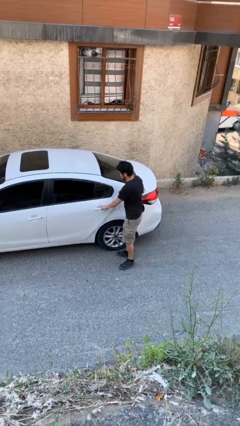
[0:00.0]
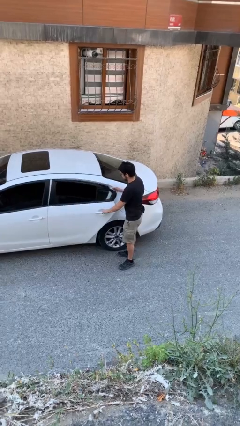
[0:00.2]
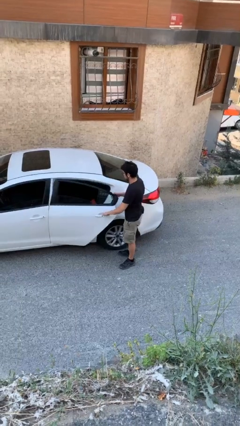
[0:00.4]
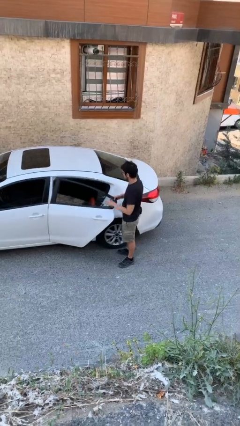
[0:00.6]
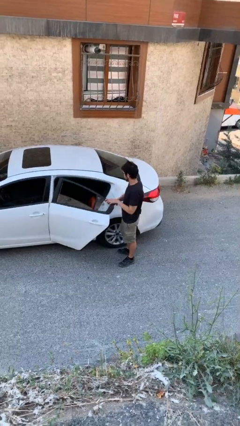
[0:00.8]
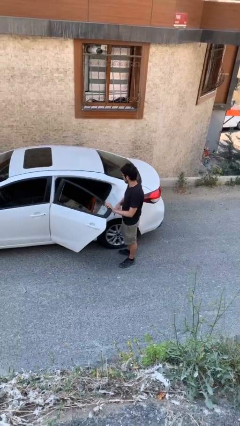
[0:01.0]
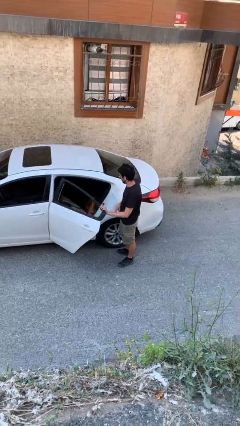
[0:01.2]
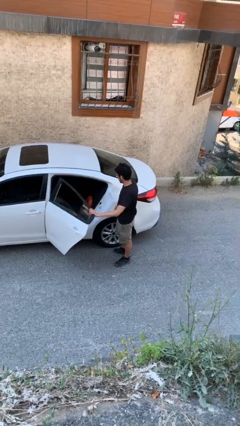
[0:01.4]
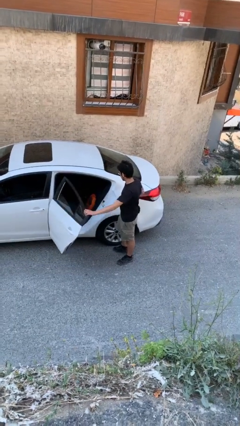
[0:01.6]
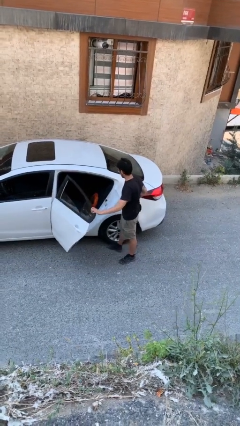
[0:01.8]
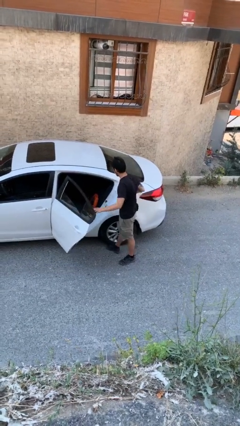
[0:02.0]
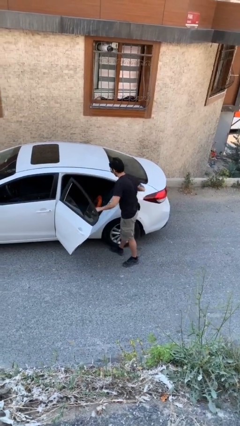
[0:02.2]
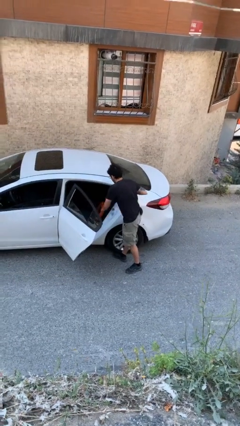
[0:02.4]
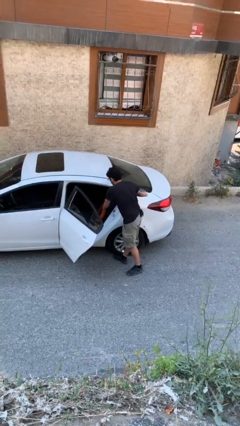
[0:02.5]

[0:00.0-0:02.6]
person opens car door

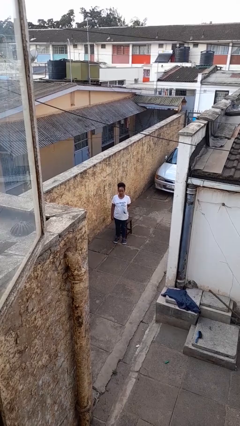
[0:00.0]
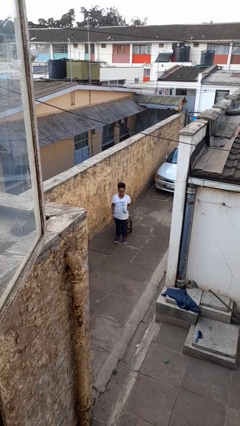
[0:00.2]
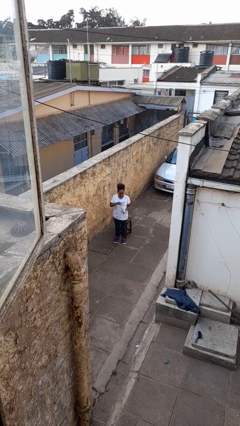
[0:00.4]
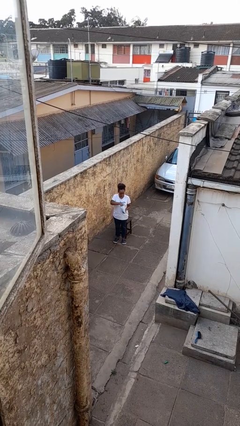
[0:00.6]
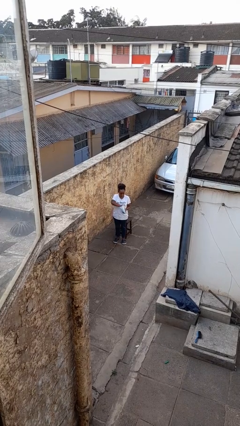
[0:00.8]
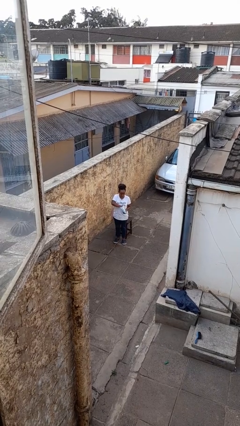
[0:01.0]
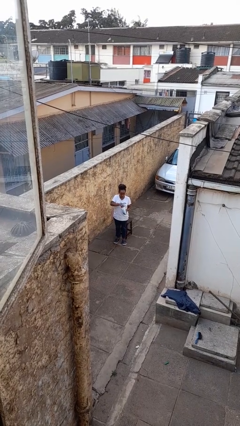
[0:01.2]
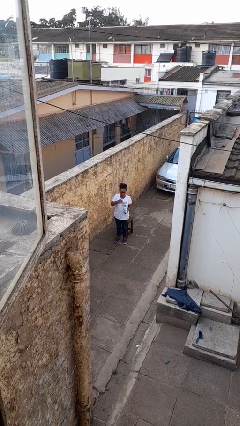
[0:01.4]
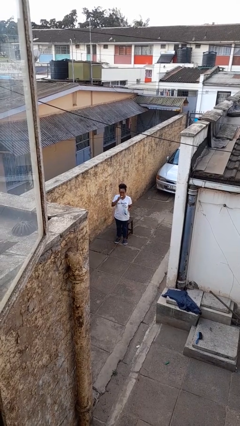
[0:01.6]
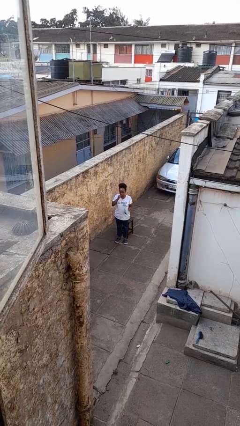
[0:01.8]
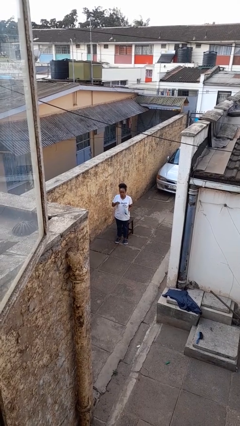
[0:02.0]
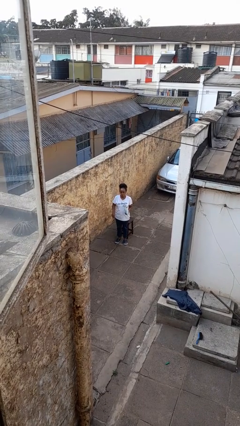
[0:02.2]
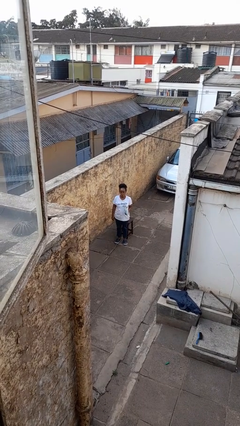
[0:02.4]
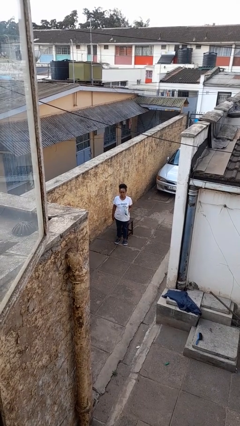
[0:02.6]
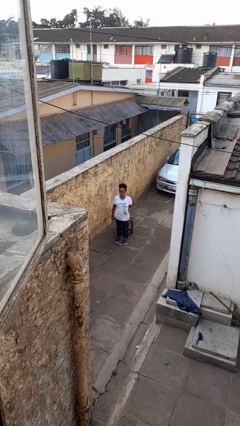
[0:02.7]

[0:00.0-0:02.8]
person eats snack from bag

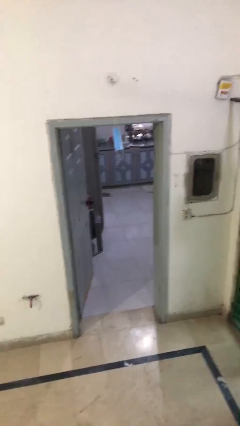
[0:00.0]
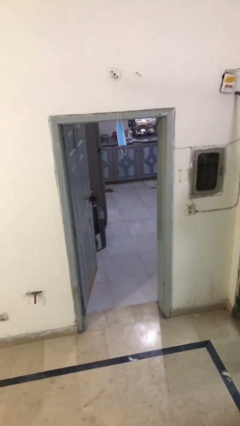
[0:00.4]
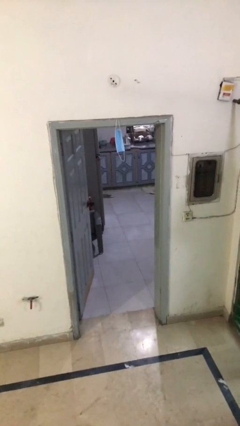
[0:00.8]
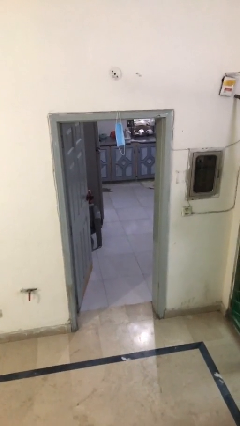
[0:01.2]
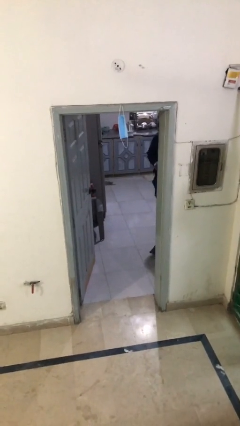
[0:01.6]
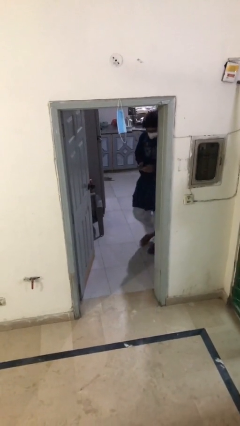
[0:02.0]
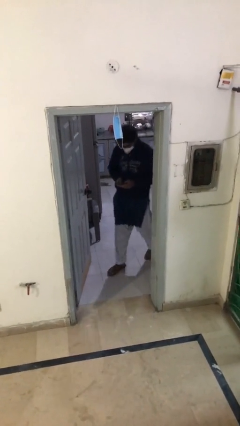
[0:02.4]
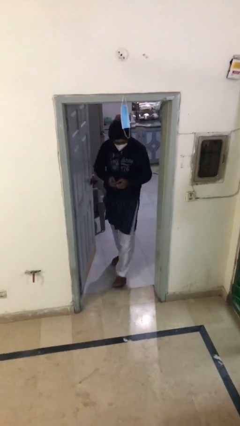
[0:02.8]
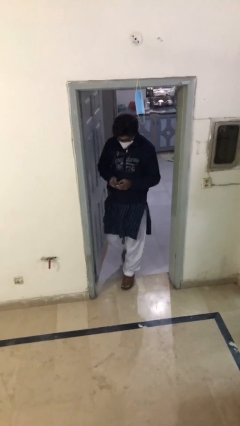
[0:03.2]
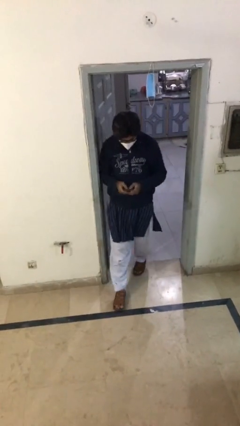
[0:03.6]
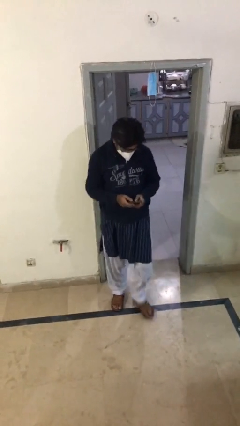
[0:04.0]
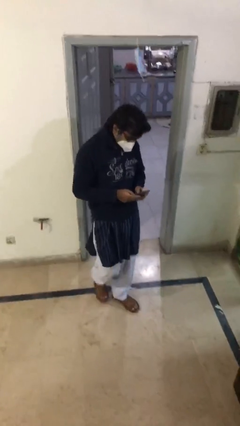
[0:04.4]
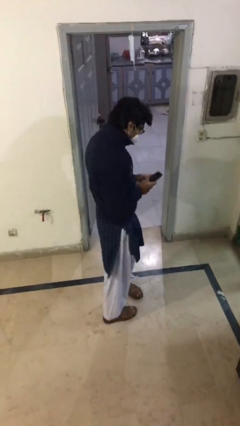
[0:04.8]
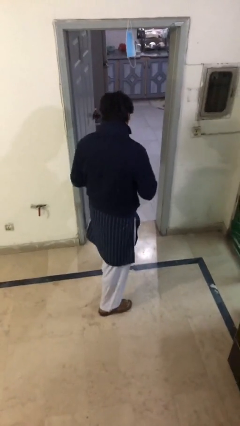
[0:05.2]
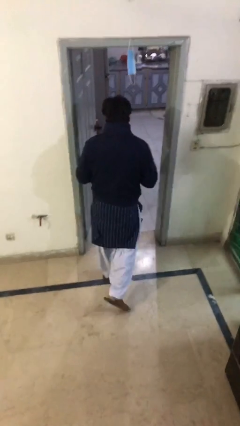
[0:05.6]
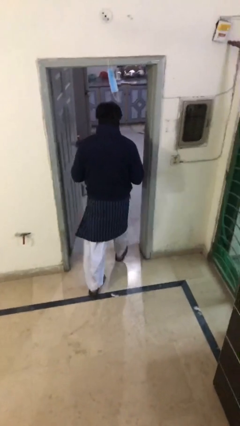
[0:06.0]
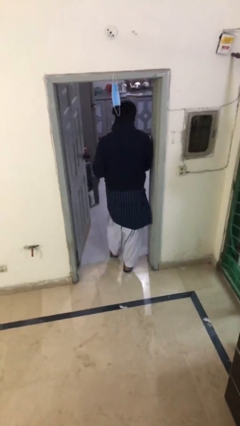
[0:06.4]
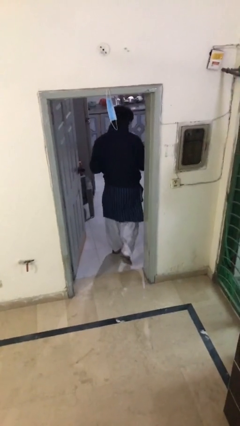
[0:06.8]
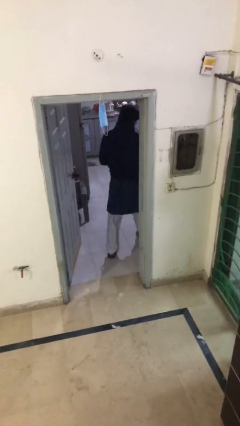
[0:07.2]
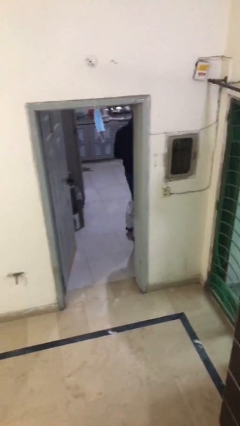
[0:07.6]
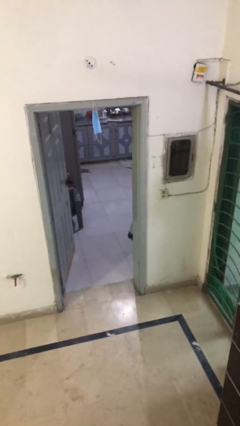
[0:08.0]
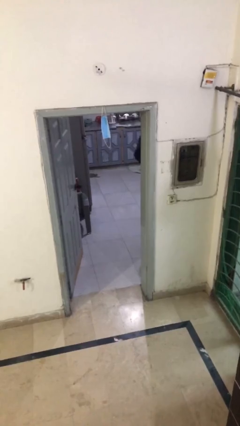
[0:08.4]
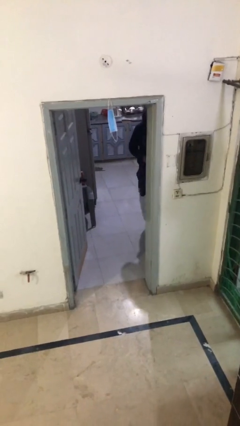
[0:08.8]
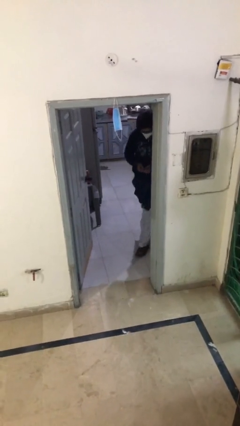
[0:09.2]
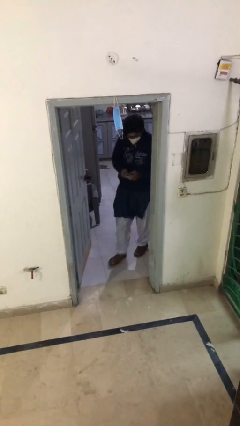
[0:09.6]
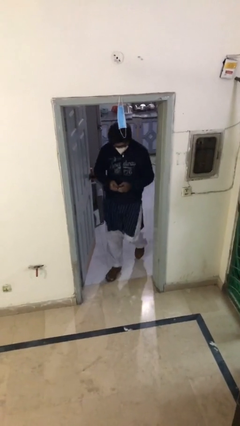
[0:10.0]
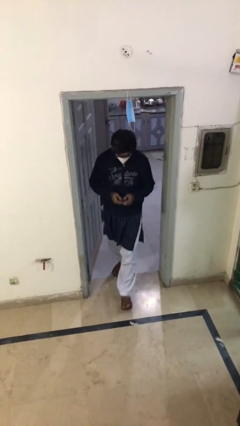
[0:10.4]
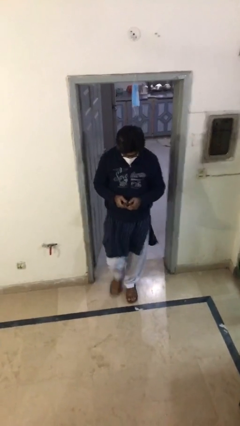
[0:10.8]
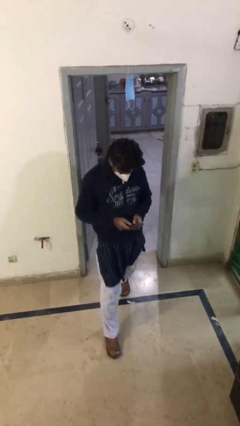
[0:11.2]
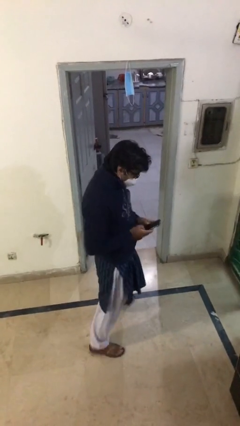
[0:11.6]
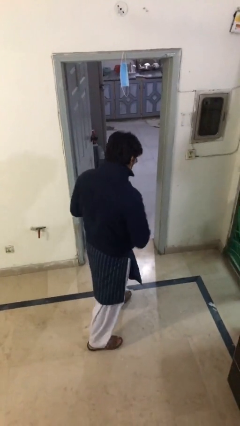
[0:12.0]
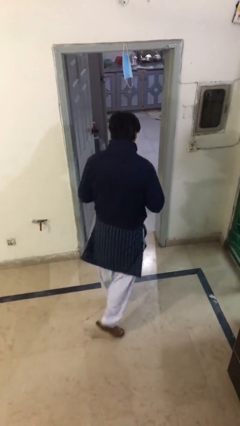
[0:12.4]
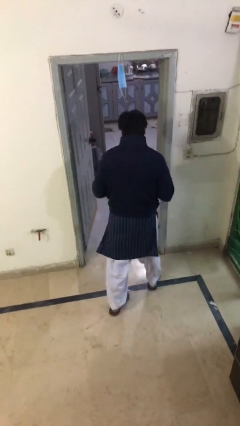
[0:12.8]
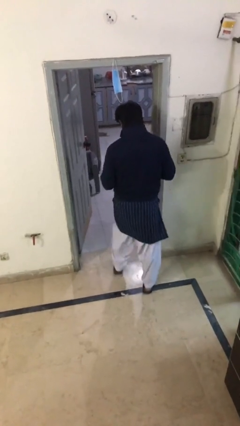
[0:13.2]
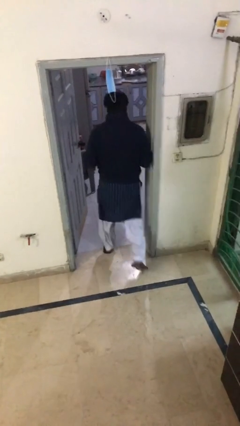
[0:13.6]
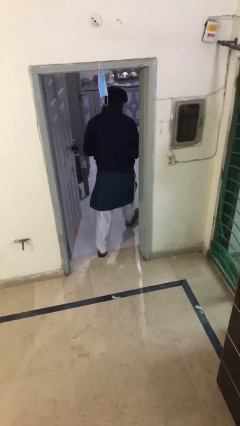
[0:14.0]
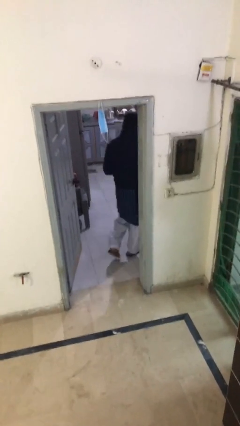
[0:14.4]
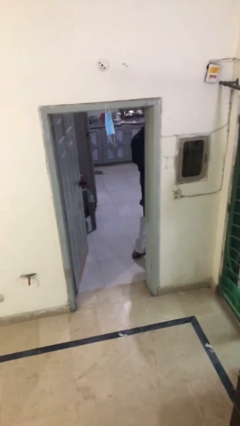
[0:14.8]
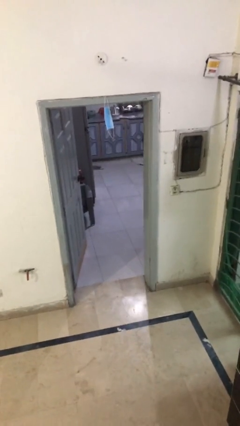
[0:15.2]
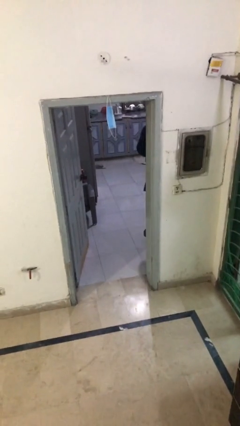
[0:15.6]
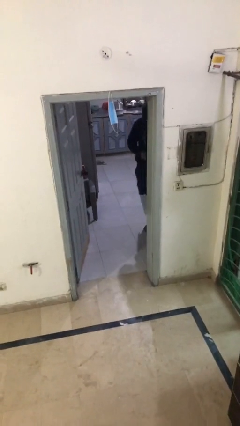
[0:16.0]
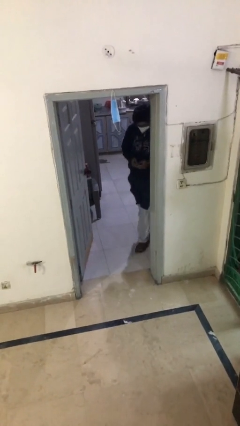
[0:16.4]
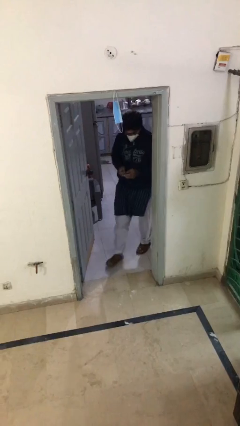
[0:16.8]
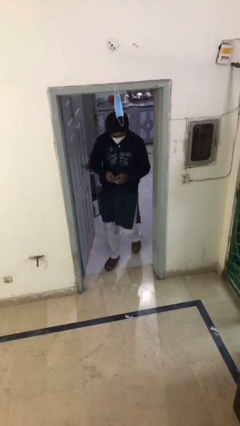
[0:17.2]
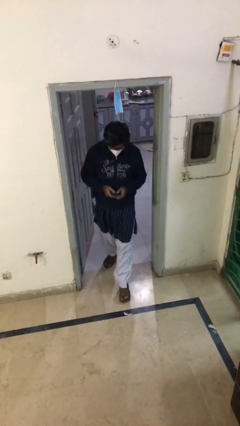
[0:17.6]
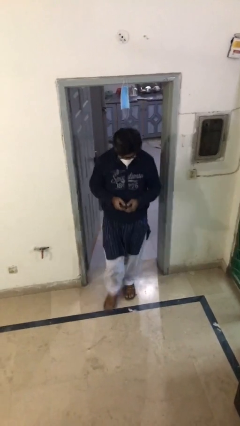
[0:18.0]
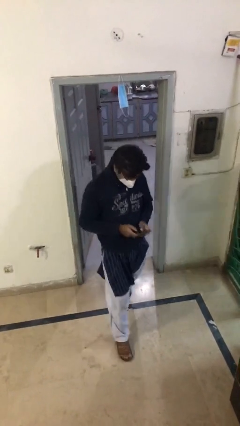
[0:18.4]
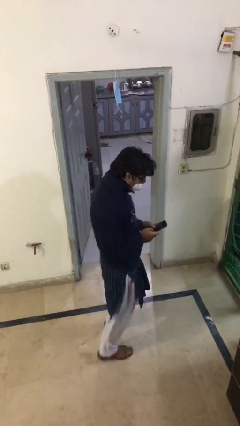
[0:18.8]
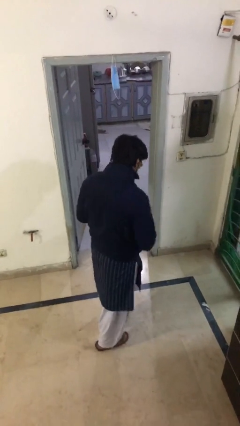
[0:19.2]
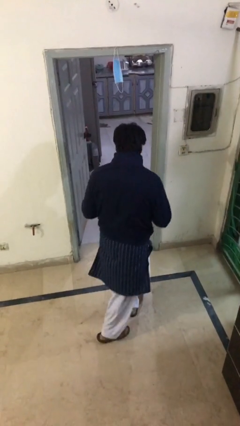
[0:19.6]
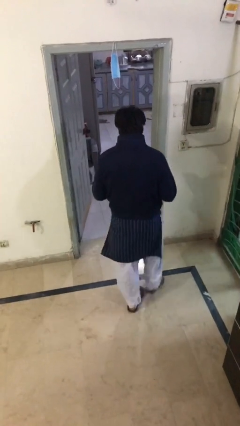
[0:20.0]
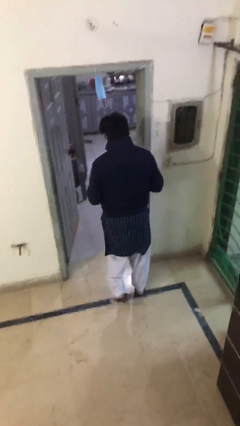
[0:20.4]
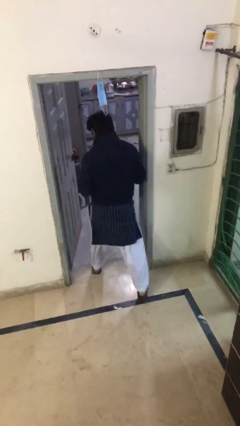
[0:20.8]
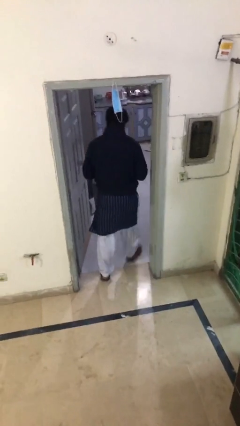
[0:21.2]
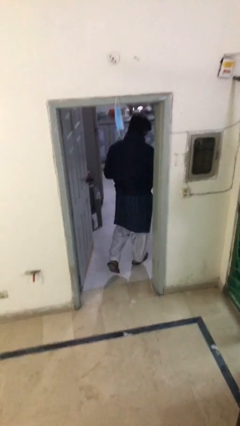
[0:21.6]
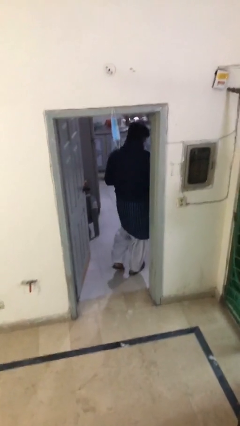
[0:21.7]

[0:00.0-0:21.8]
person texts on phone

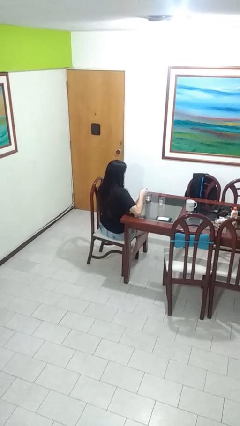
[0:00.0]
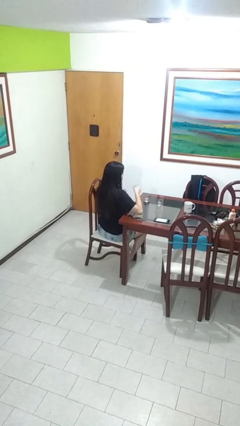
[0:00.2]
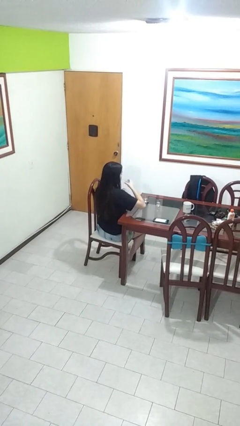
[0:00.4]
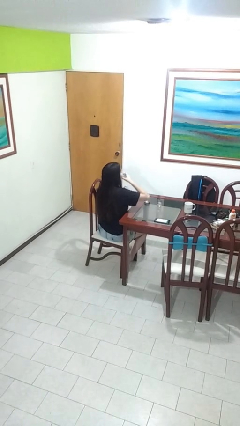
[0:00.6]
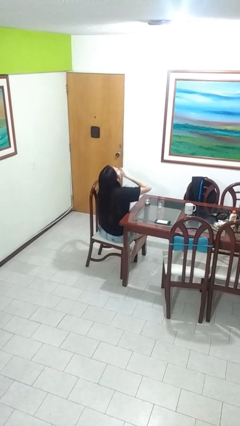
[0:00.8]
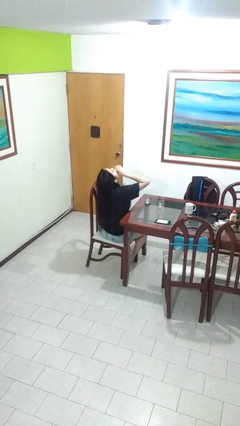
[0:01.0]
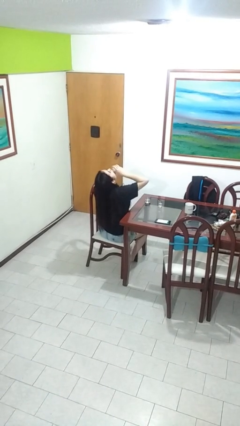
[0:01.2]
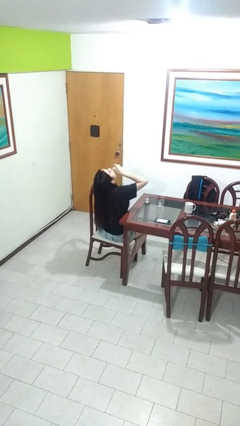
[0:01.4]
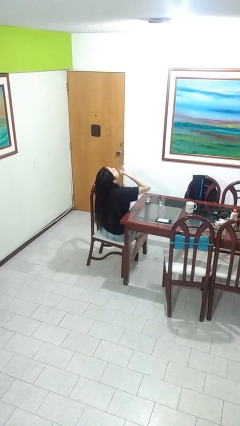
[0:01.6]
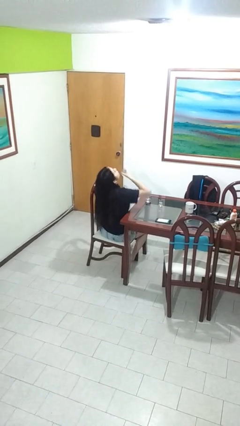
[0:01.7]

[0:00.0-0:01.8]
person drinks from shotglass
